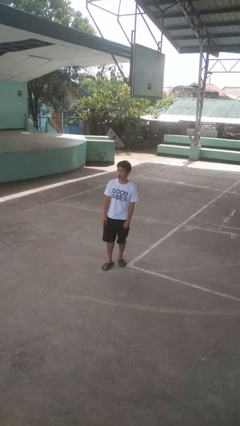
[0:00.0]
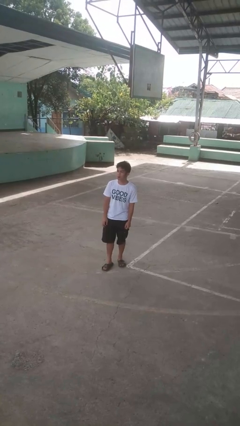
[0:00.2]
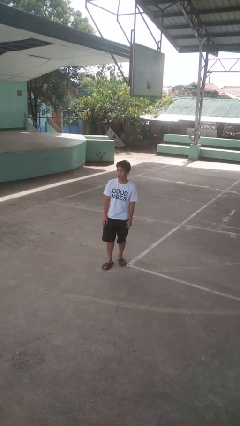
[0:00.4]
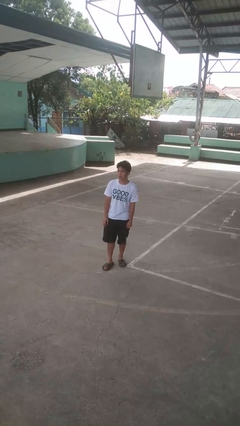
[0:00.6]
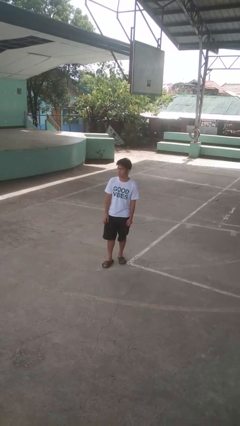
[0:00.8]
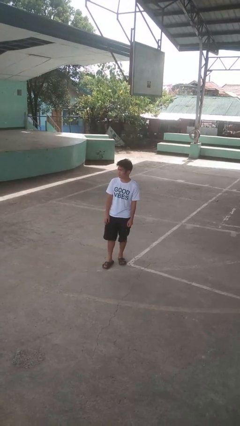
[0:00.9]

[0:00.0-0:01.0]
person sticks out tongue

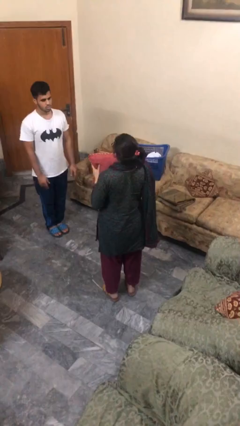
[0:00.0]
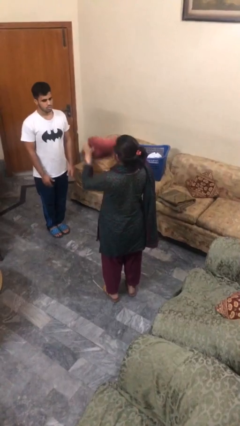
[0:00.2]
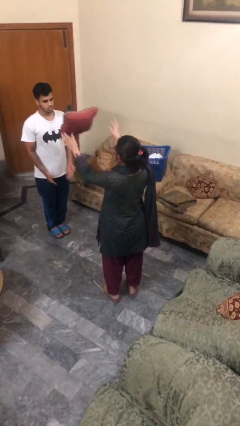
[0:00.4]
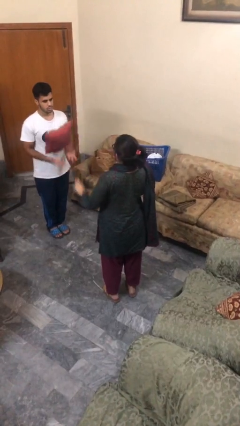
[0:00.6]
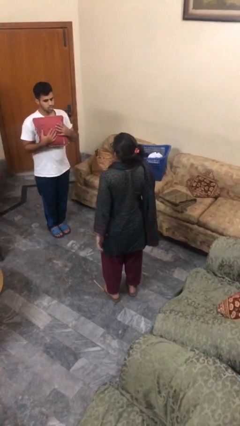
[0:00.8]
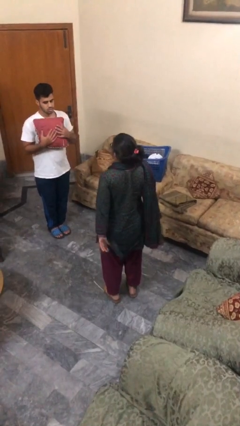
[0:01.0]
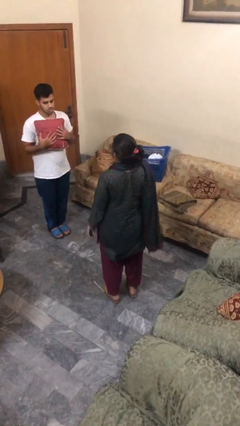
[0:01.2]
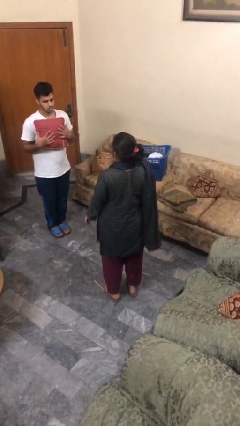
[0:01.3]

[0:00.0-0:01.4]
person throws object to person

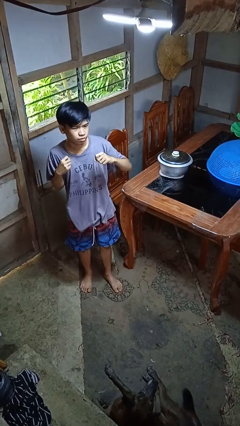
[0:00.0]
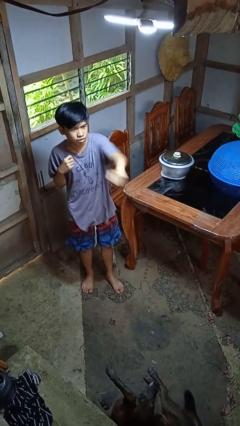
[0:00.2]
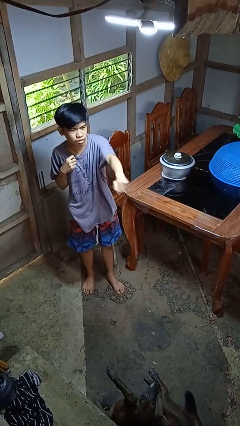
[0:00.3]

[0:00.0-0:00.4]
person punches

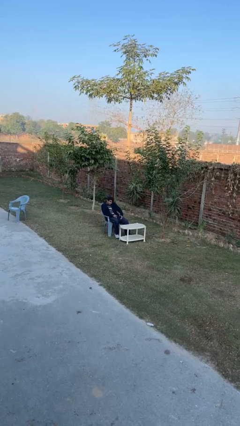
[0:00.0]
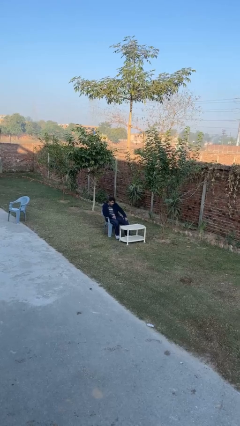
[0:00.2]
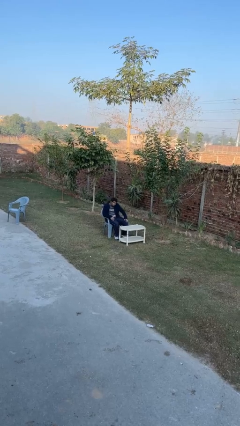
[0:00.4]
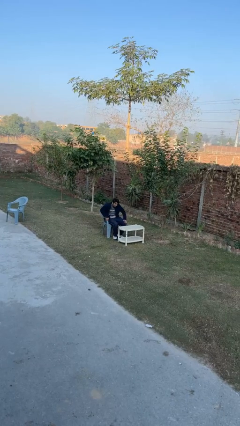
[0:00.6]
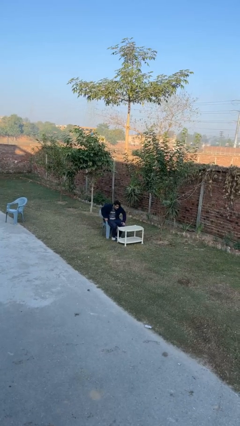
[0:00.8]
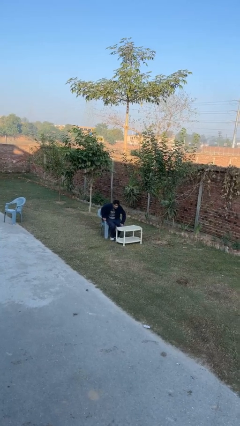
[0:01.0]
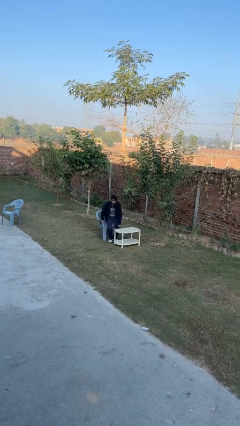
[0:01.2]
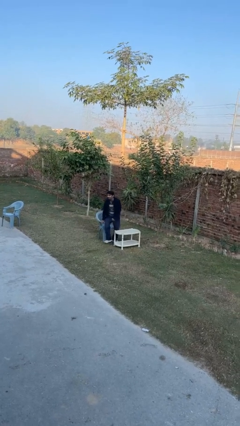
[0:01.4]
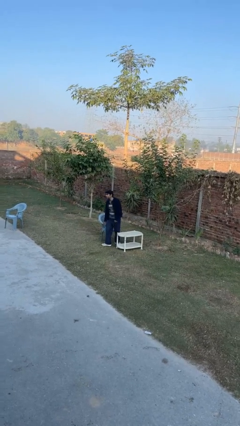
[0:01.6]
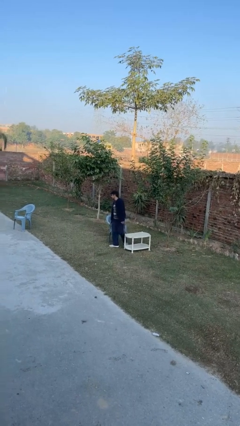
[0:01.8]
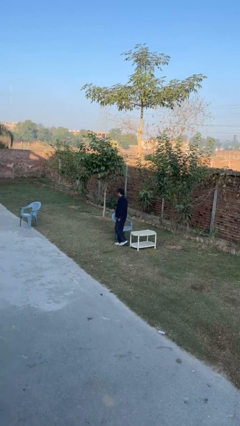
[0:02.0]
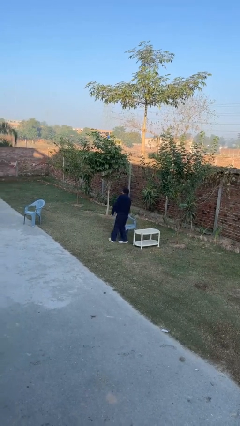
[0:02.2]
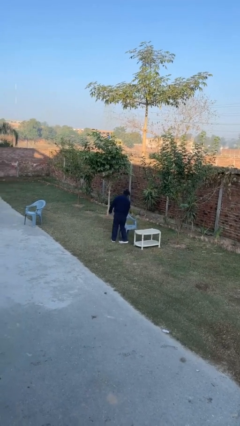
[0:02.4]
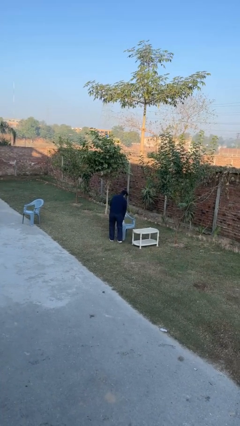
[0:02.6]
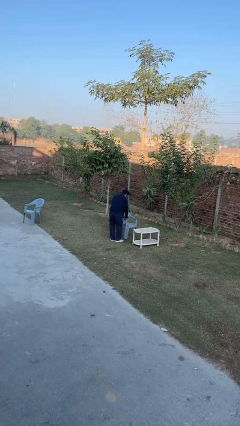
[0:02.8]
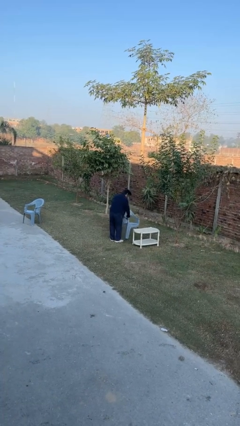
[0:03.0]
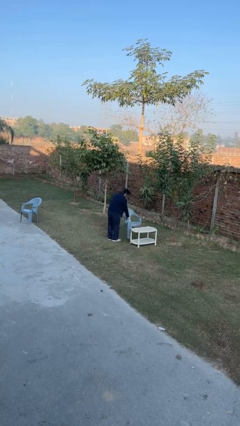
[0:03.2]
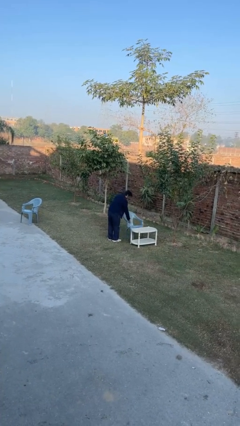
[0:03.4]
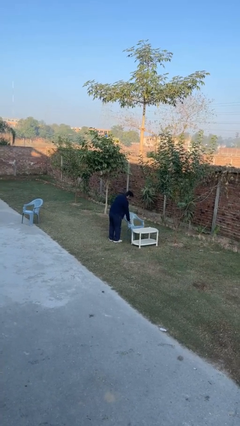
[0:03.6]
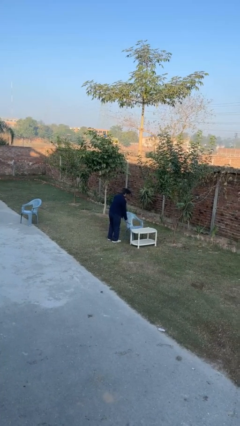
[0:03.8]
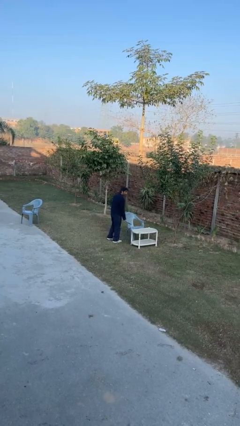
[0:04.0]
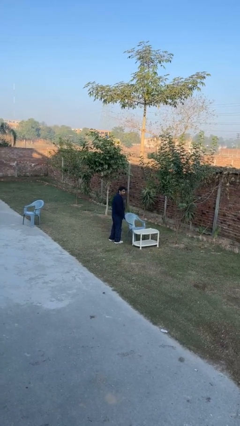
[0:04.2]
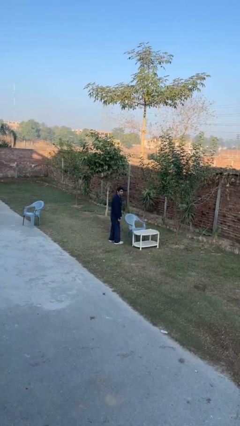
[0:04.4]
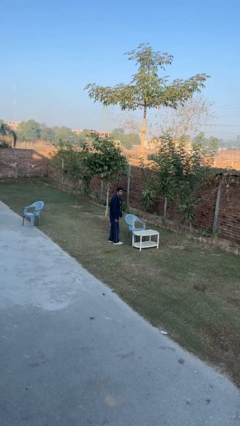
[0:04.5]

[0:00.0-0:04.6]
person stands up

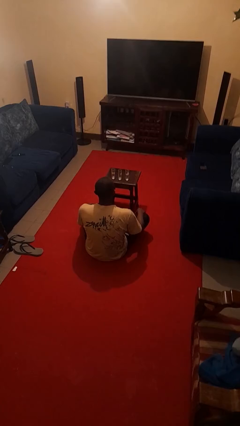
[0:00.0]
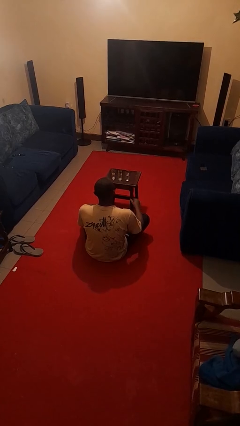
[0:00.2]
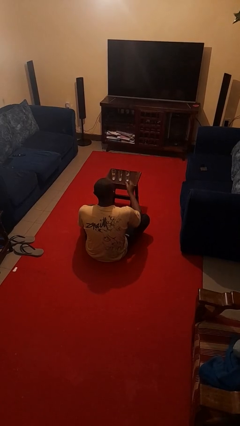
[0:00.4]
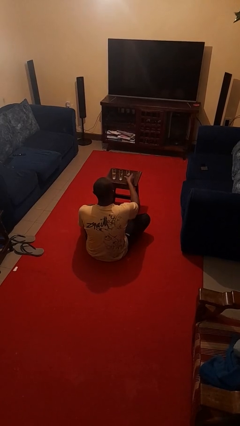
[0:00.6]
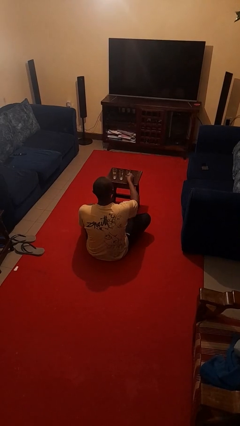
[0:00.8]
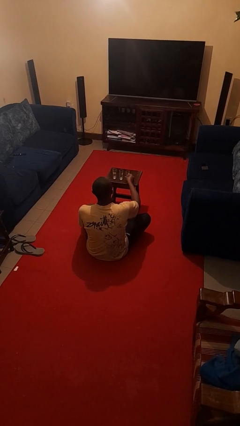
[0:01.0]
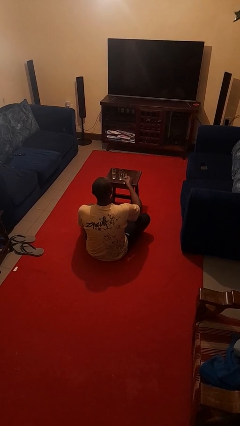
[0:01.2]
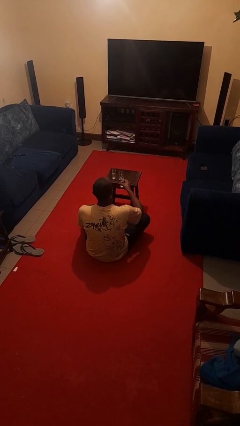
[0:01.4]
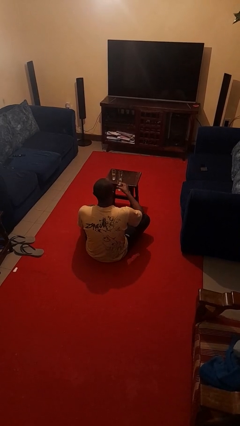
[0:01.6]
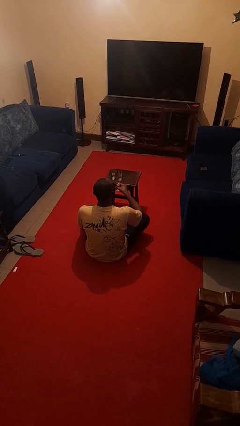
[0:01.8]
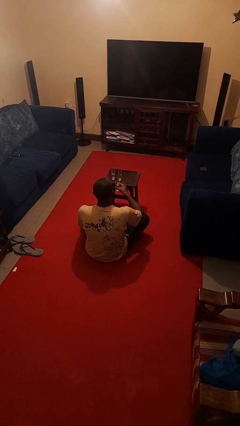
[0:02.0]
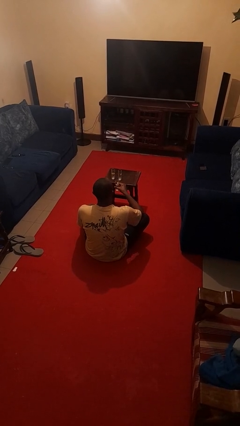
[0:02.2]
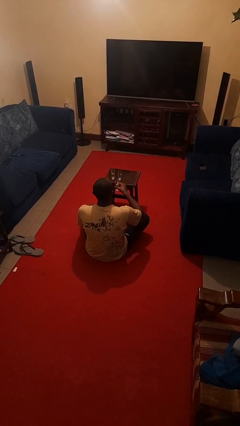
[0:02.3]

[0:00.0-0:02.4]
person picks up object from table

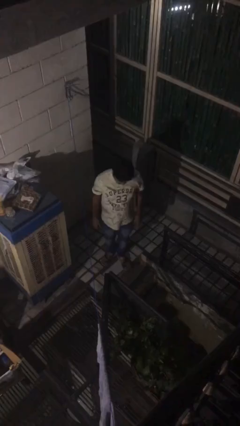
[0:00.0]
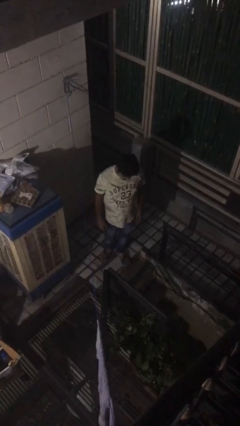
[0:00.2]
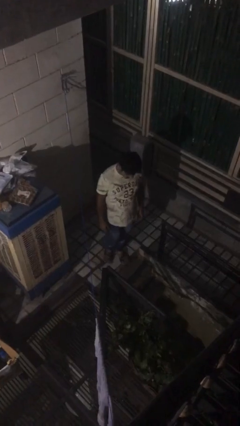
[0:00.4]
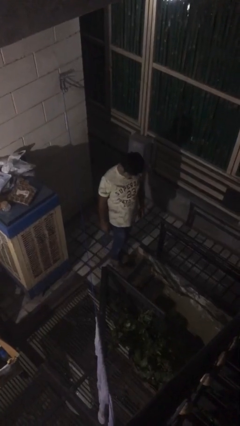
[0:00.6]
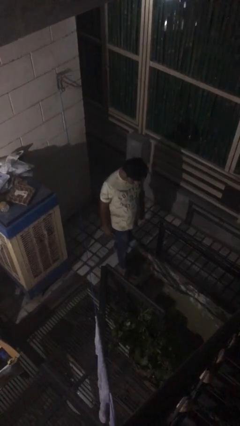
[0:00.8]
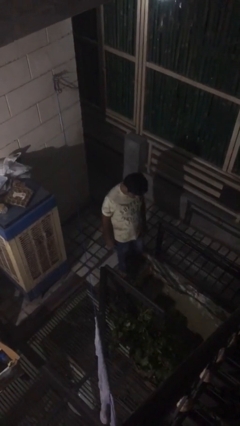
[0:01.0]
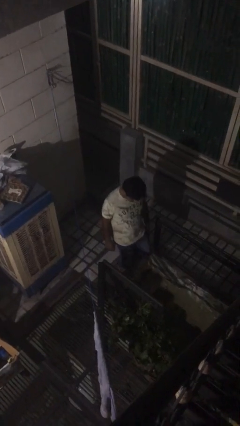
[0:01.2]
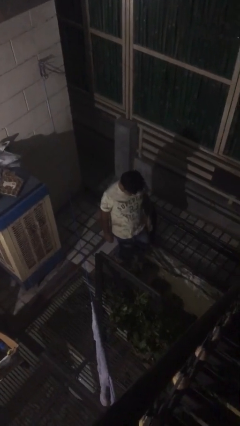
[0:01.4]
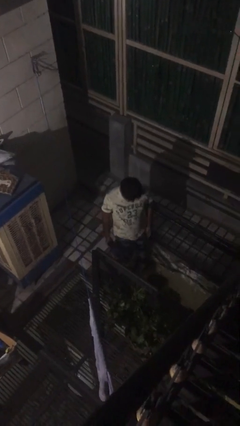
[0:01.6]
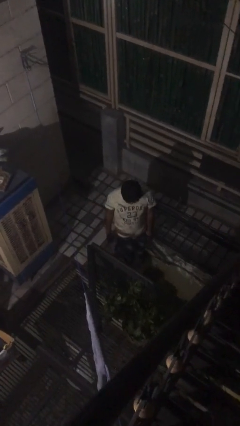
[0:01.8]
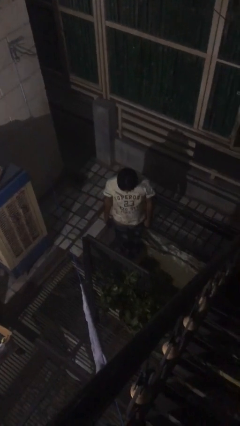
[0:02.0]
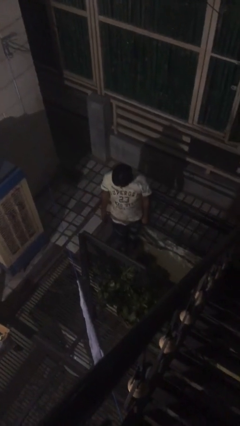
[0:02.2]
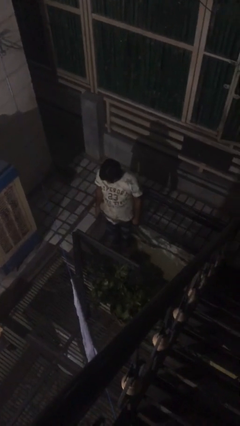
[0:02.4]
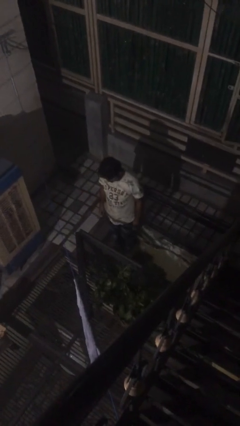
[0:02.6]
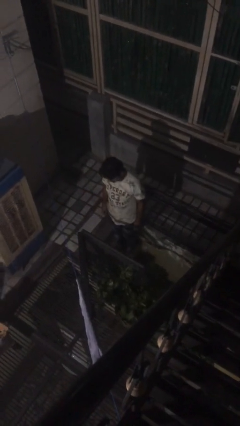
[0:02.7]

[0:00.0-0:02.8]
person climbs down stairs

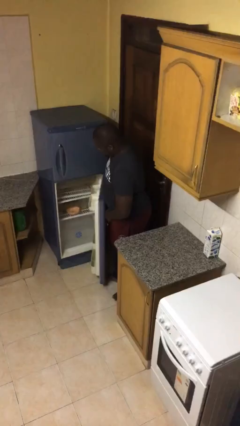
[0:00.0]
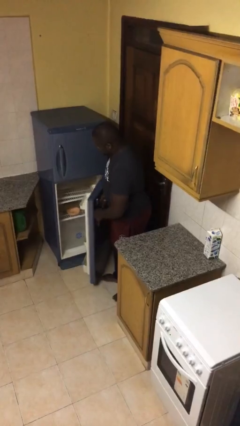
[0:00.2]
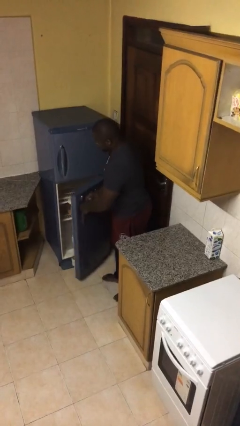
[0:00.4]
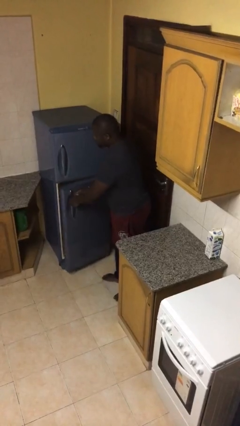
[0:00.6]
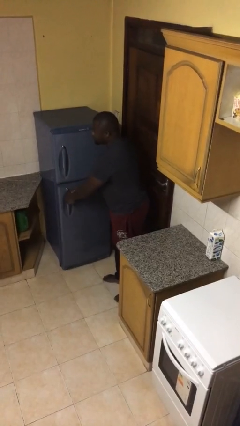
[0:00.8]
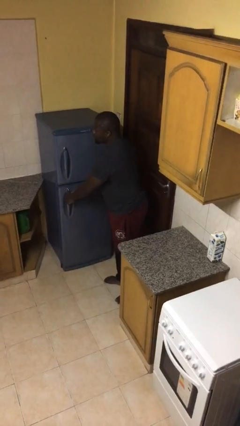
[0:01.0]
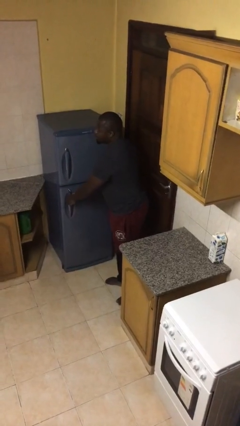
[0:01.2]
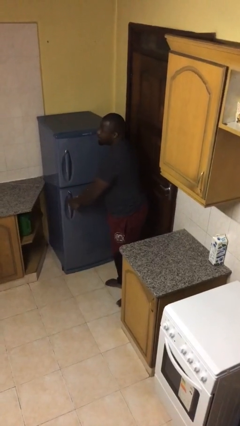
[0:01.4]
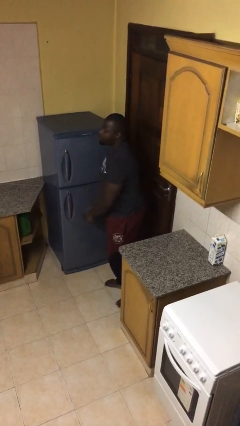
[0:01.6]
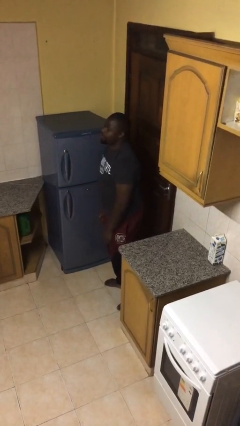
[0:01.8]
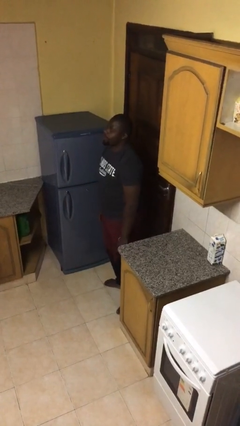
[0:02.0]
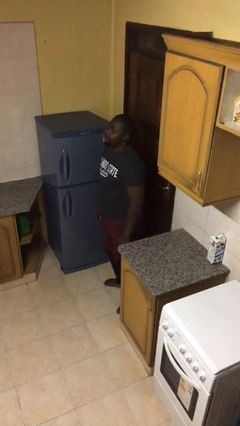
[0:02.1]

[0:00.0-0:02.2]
person closes refrigerator

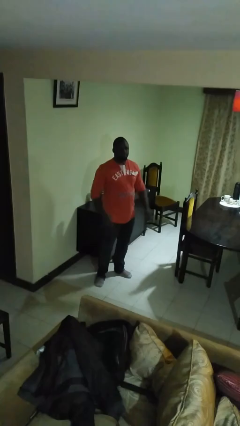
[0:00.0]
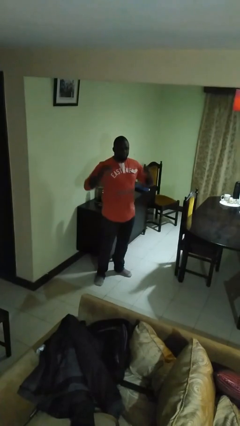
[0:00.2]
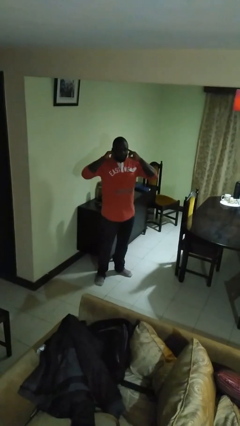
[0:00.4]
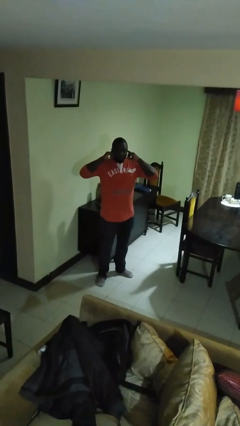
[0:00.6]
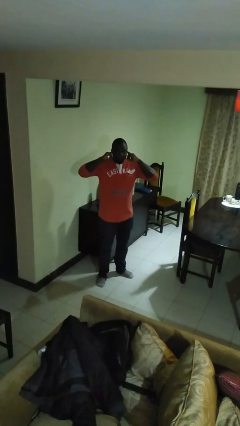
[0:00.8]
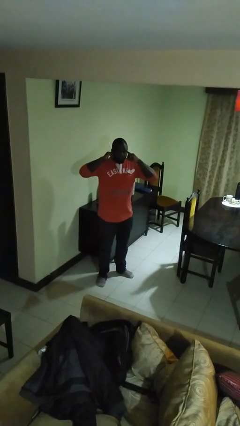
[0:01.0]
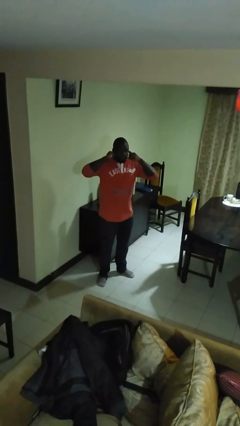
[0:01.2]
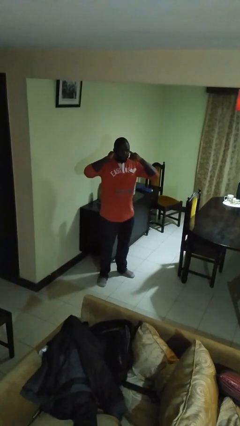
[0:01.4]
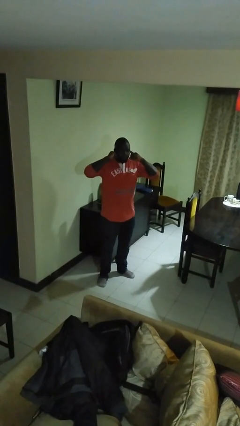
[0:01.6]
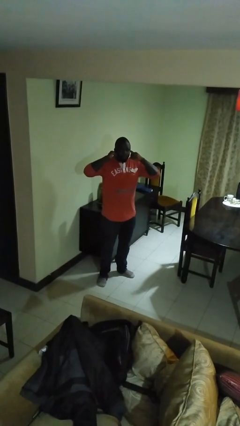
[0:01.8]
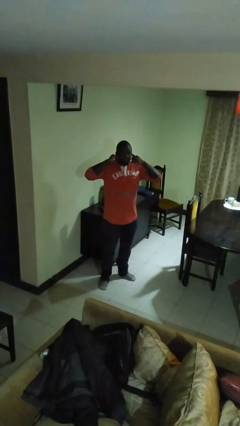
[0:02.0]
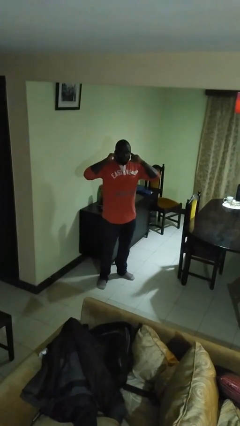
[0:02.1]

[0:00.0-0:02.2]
person puts fingers in ear
